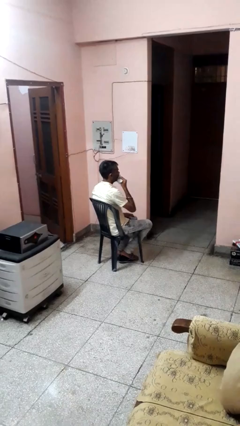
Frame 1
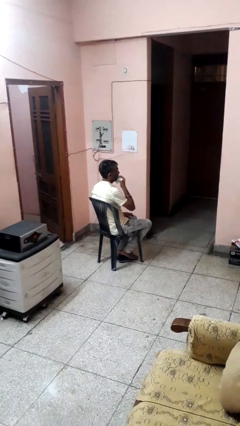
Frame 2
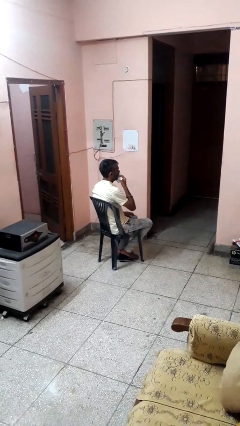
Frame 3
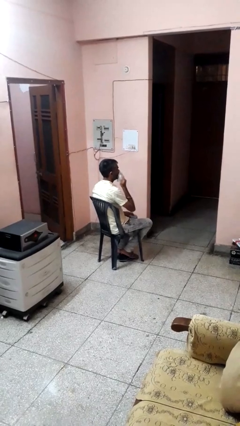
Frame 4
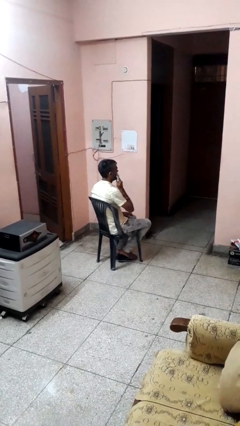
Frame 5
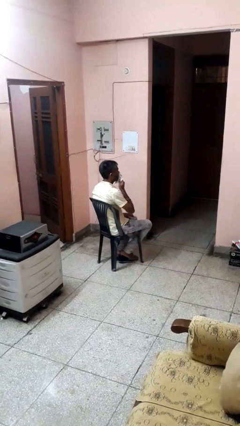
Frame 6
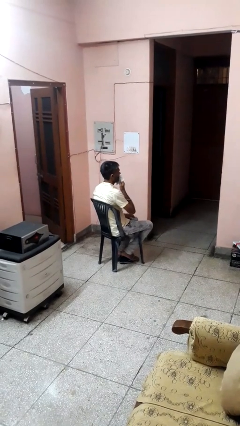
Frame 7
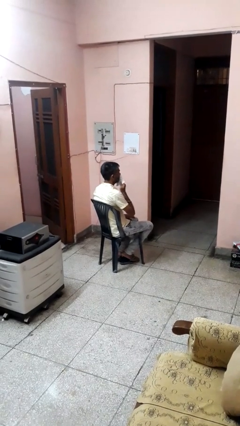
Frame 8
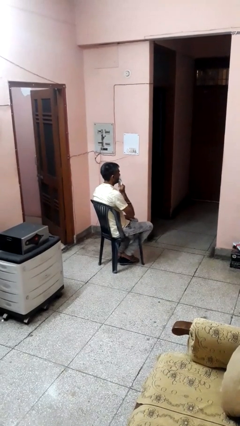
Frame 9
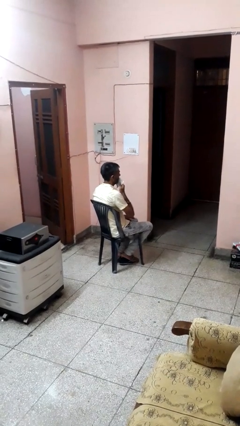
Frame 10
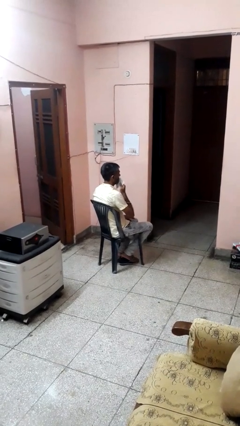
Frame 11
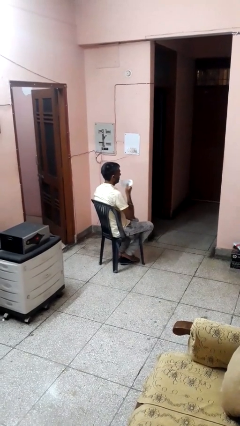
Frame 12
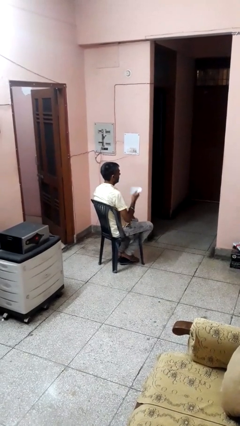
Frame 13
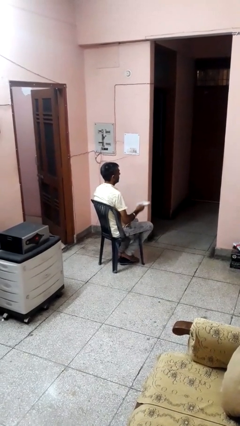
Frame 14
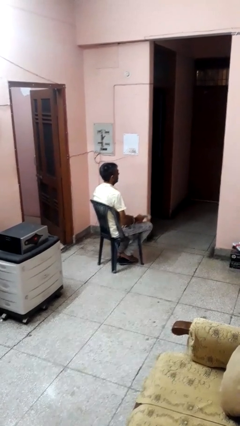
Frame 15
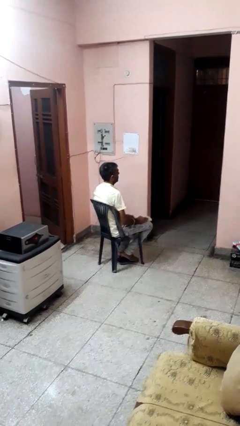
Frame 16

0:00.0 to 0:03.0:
person wipes mouth with napkin

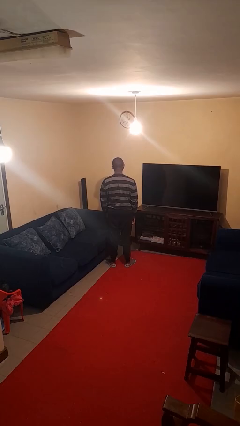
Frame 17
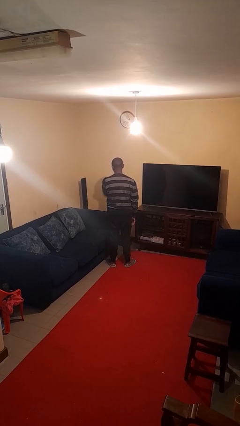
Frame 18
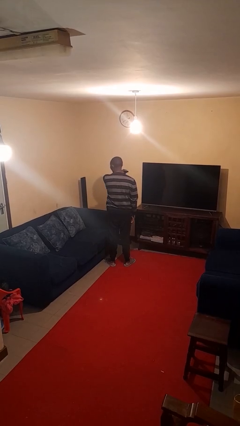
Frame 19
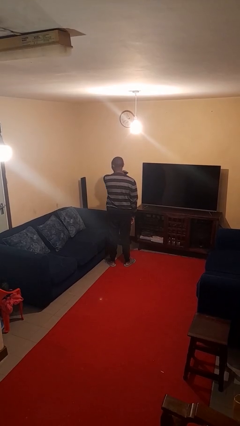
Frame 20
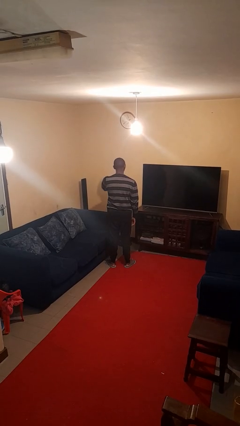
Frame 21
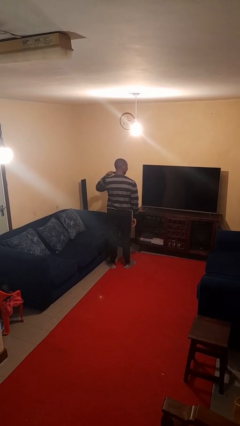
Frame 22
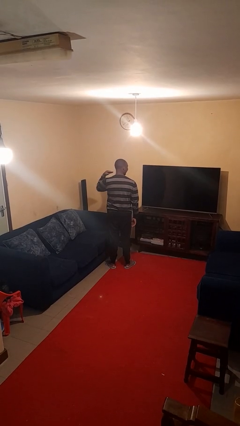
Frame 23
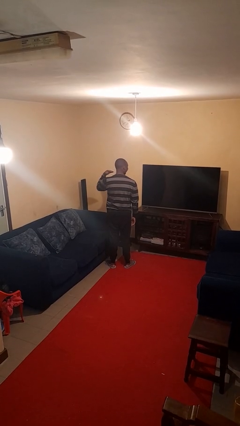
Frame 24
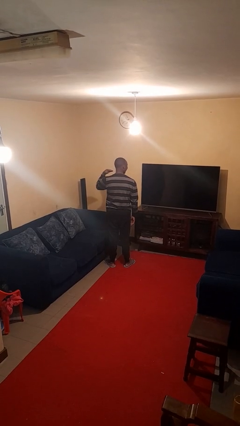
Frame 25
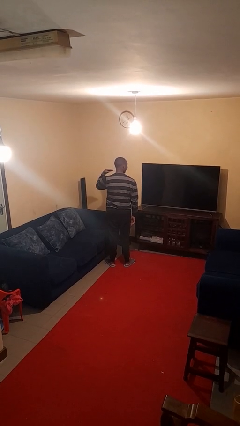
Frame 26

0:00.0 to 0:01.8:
person gestures cut

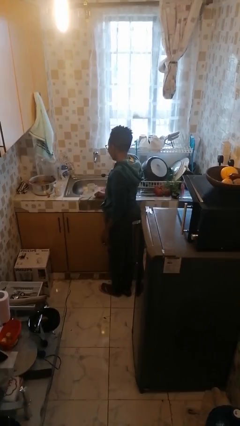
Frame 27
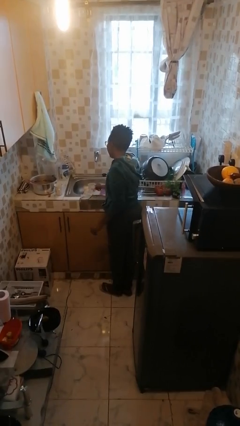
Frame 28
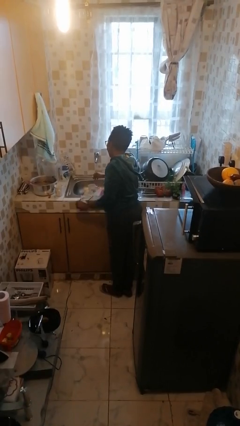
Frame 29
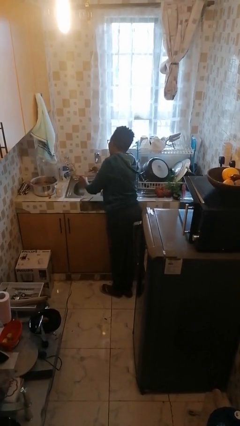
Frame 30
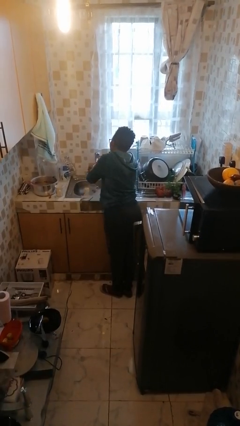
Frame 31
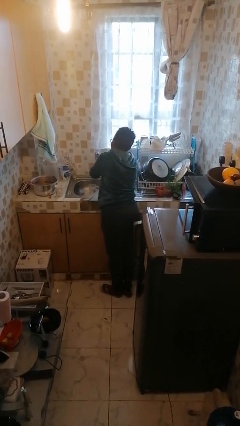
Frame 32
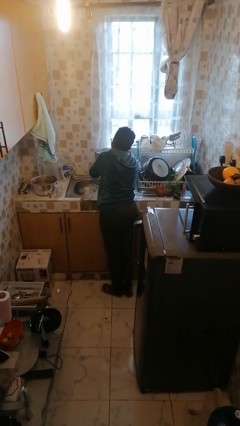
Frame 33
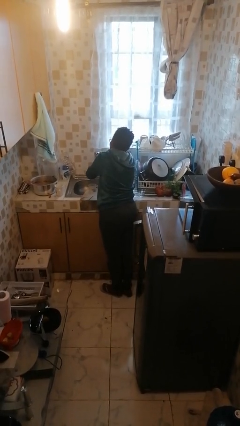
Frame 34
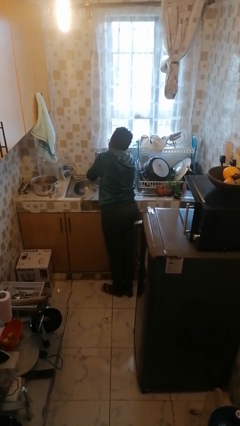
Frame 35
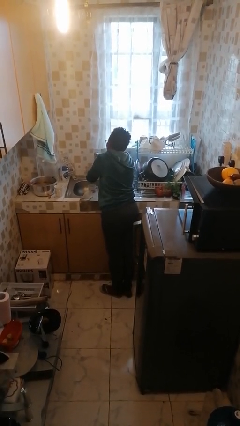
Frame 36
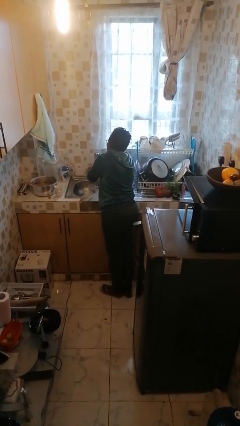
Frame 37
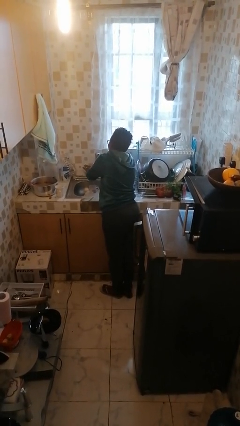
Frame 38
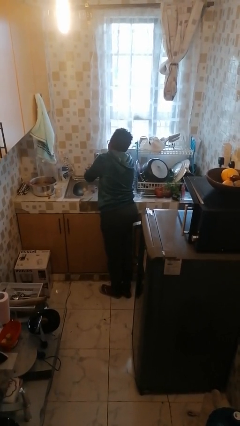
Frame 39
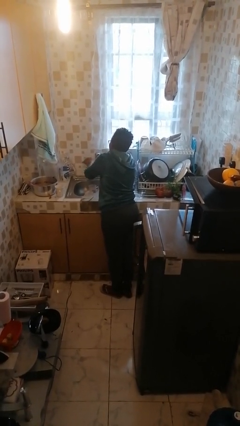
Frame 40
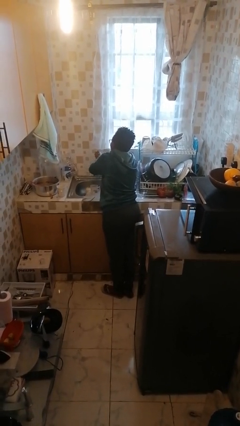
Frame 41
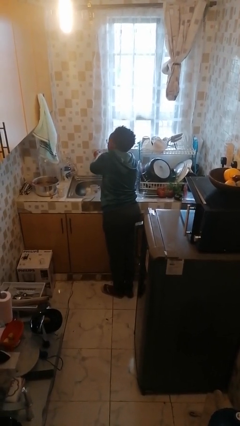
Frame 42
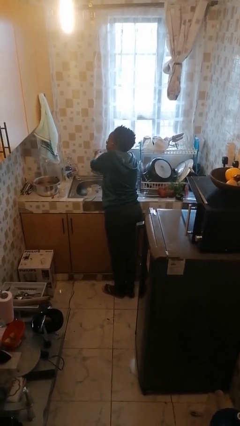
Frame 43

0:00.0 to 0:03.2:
person washes hands

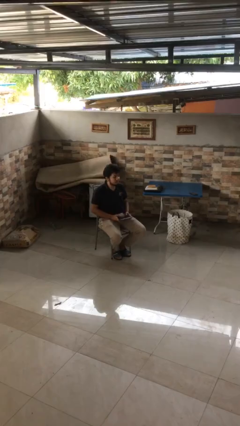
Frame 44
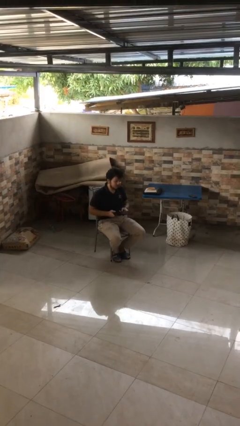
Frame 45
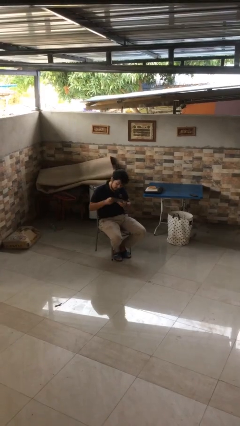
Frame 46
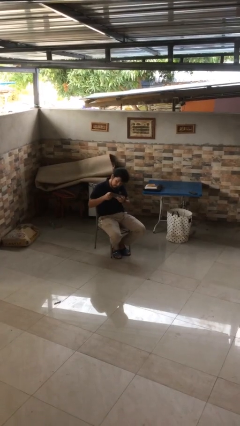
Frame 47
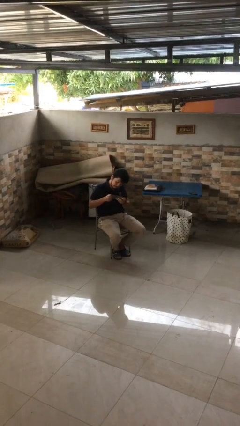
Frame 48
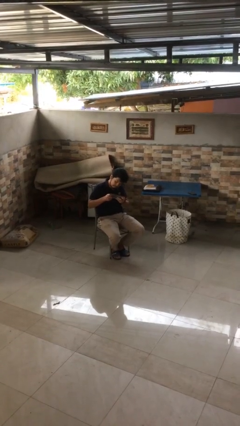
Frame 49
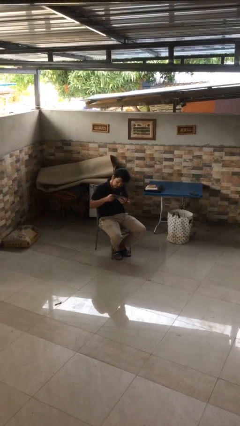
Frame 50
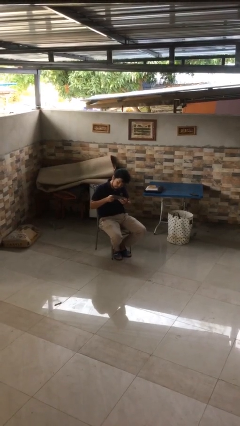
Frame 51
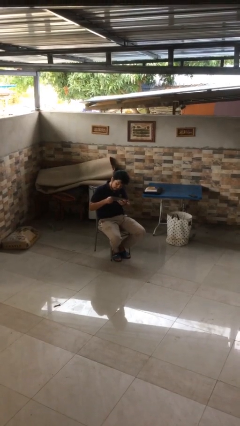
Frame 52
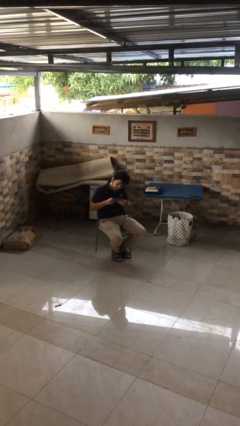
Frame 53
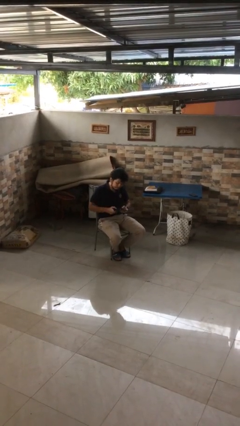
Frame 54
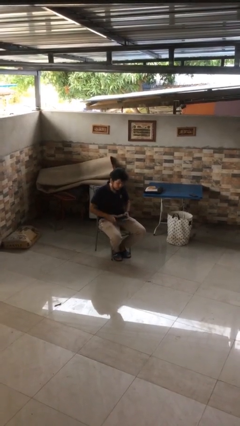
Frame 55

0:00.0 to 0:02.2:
person interacts with handheld game

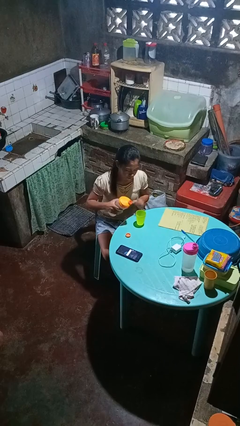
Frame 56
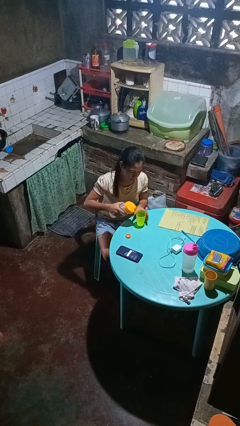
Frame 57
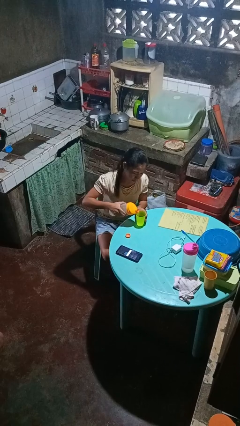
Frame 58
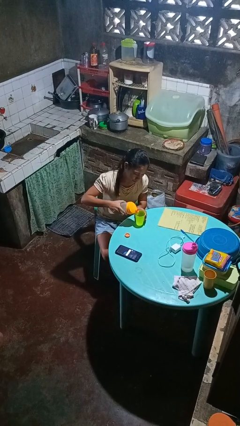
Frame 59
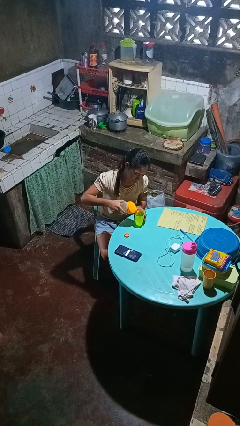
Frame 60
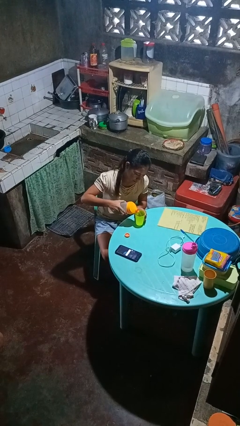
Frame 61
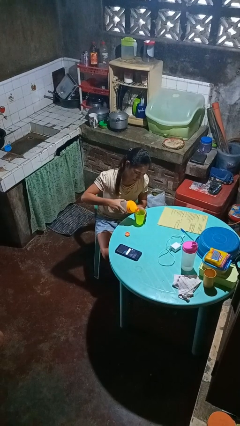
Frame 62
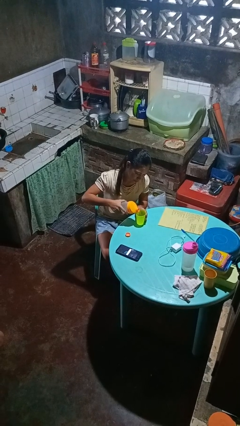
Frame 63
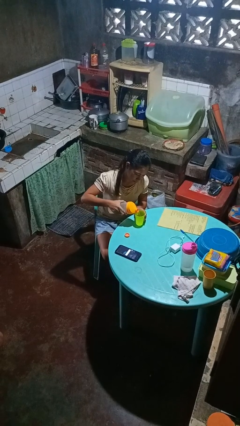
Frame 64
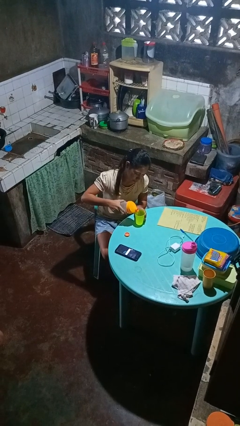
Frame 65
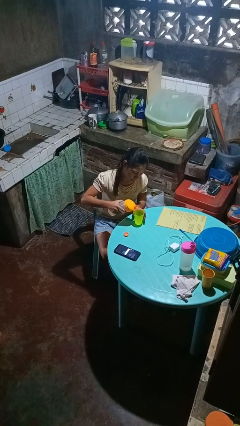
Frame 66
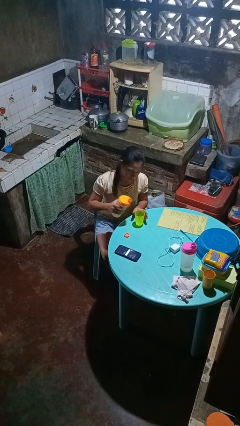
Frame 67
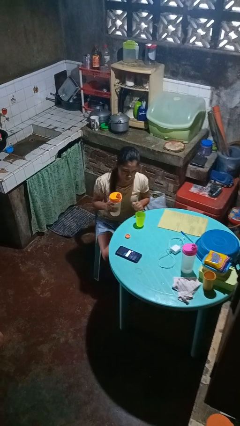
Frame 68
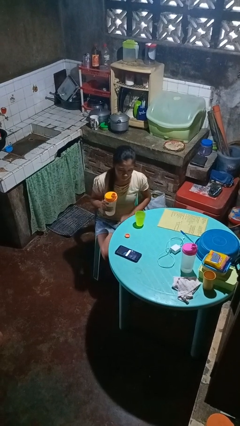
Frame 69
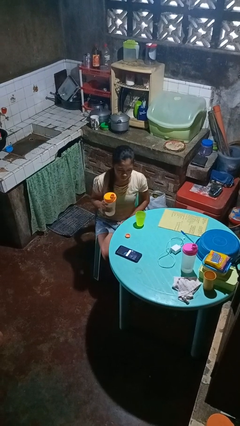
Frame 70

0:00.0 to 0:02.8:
person pours liquid into cup

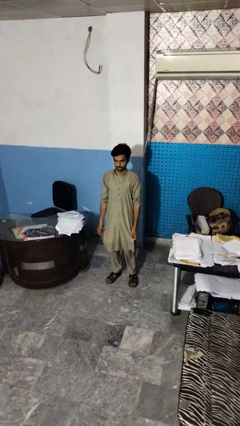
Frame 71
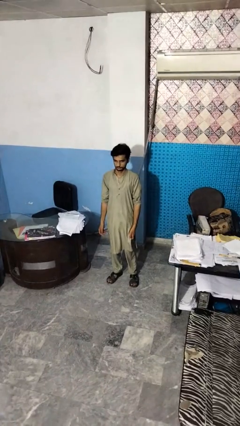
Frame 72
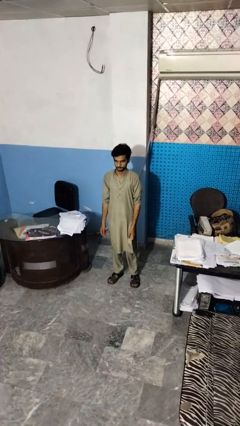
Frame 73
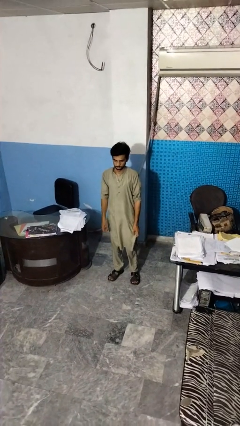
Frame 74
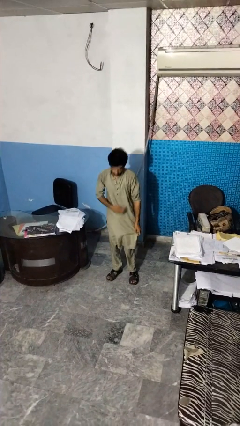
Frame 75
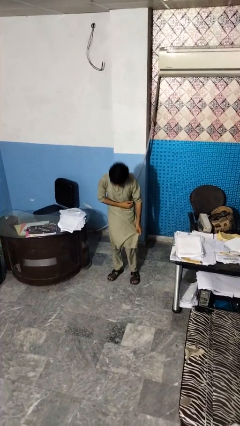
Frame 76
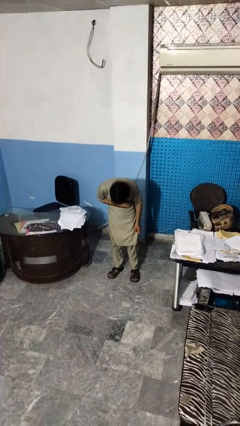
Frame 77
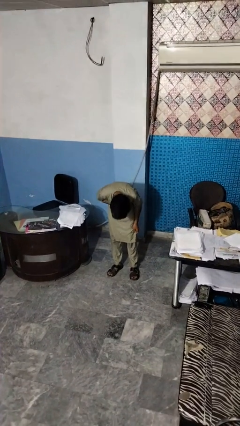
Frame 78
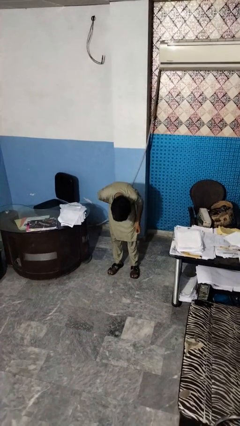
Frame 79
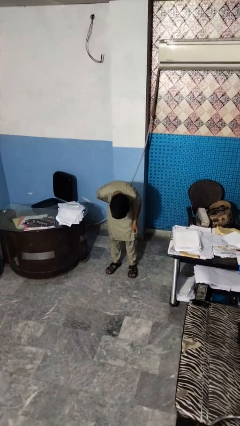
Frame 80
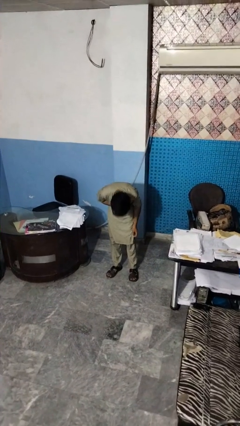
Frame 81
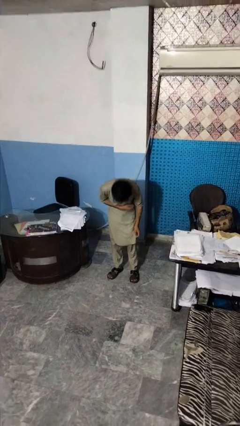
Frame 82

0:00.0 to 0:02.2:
person bows

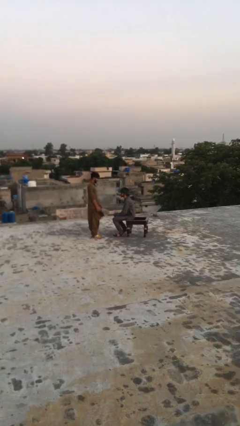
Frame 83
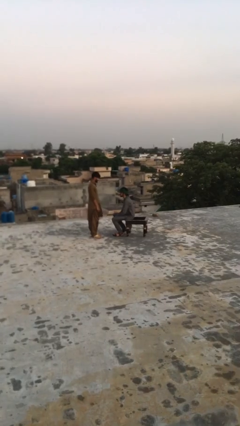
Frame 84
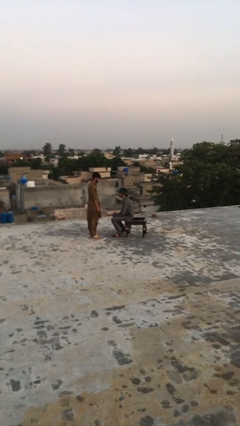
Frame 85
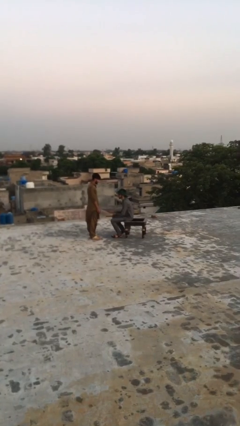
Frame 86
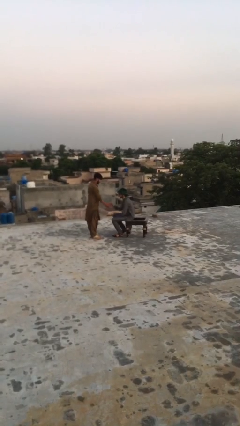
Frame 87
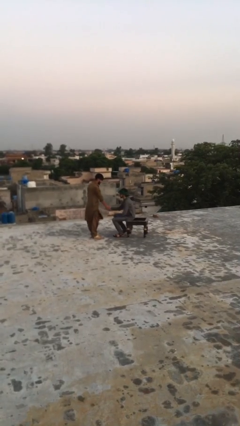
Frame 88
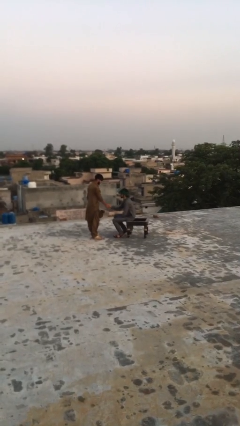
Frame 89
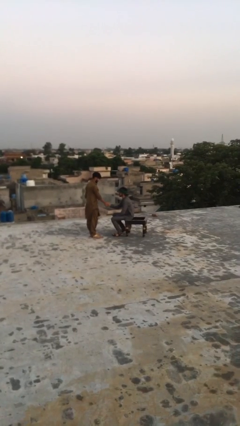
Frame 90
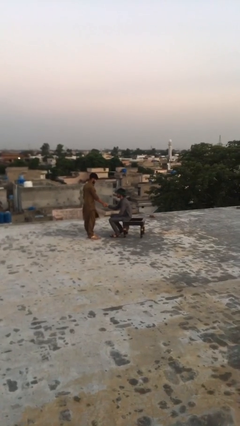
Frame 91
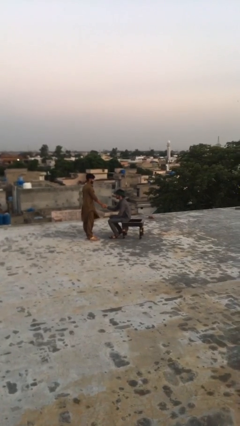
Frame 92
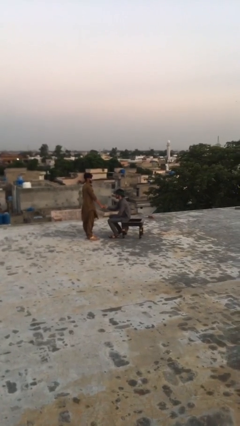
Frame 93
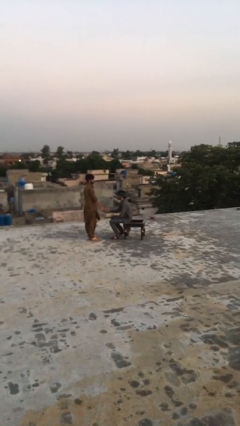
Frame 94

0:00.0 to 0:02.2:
person shakes hand
